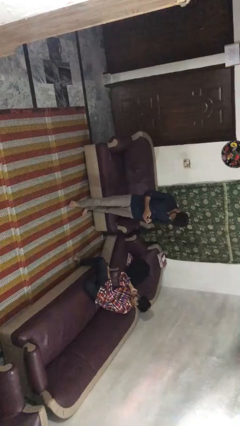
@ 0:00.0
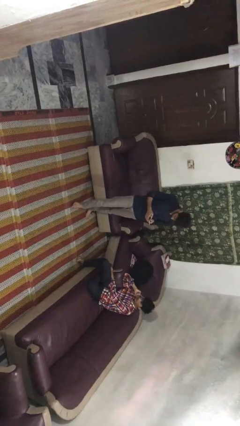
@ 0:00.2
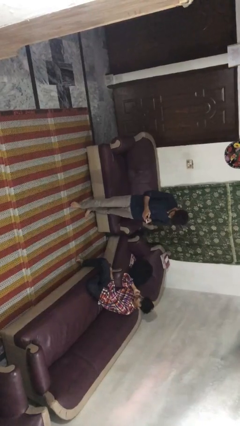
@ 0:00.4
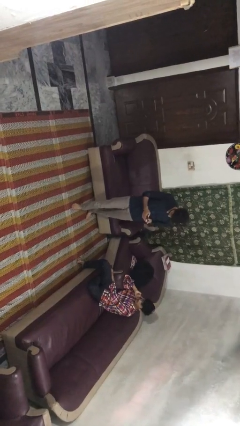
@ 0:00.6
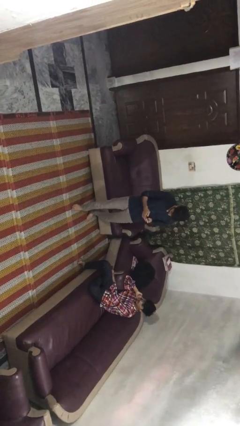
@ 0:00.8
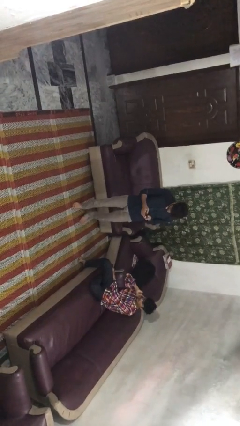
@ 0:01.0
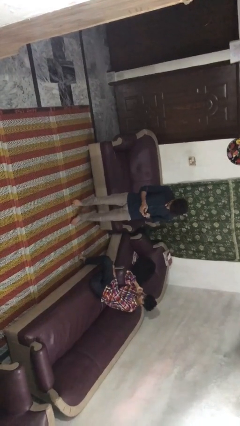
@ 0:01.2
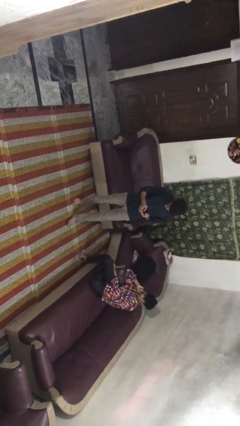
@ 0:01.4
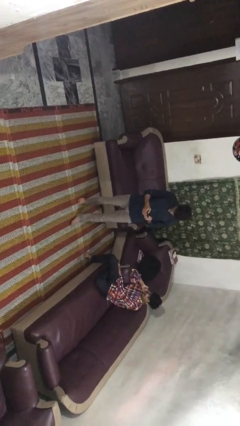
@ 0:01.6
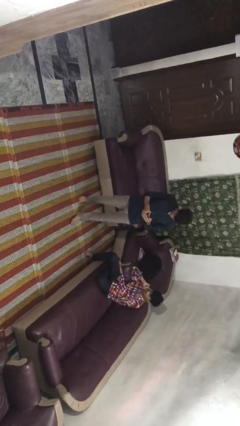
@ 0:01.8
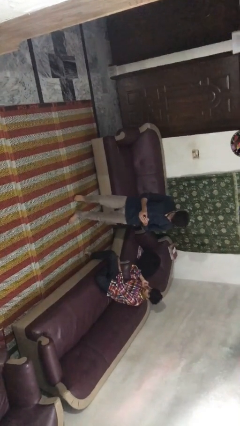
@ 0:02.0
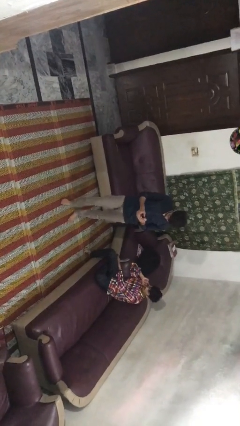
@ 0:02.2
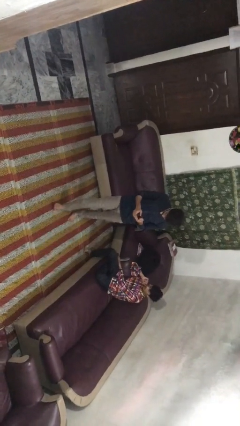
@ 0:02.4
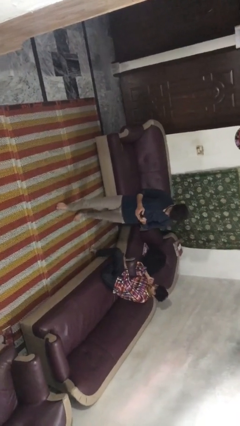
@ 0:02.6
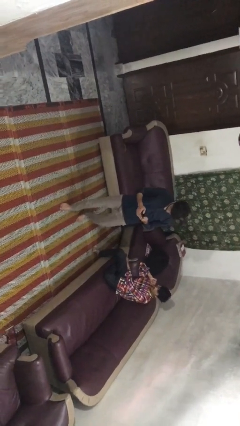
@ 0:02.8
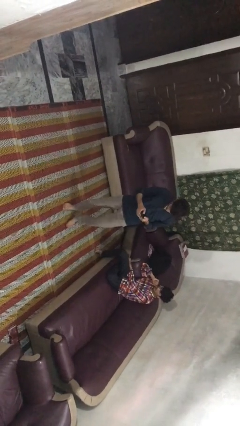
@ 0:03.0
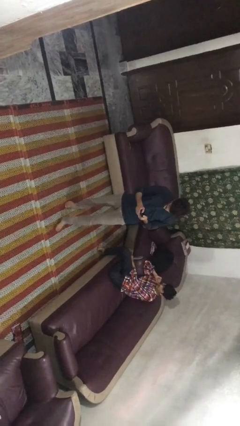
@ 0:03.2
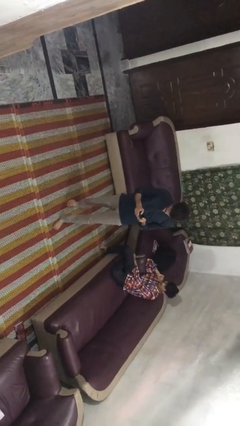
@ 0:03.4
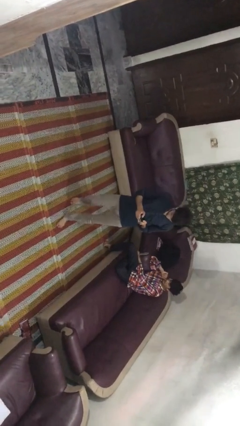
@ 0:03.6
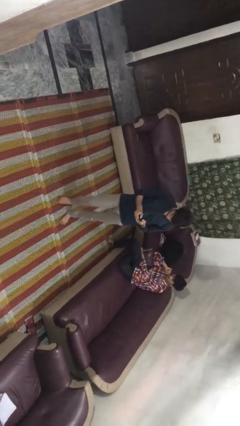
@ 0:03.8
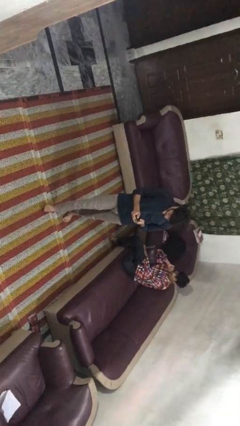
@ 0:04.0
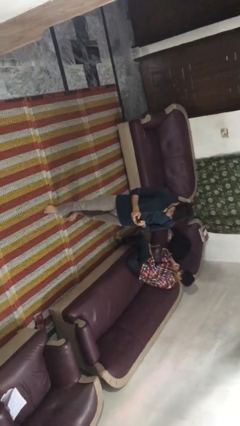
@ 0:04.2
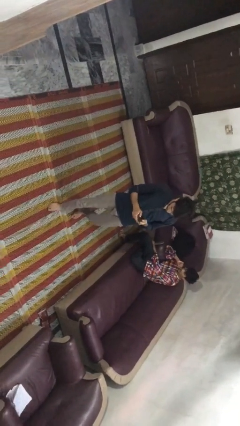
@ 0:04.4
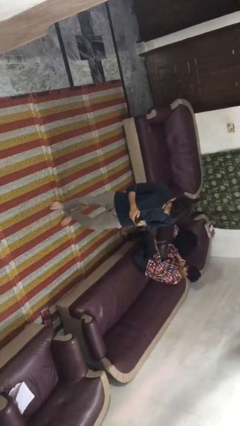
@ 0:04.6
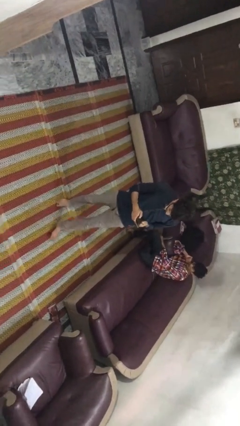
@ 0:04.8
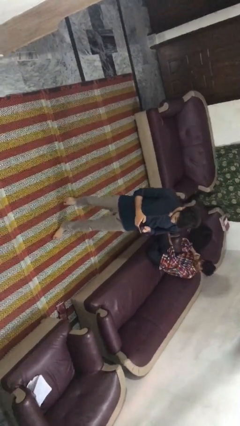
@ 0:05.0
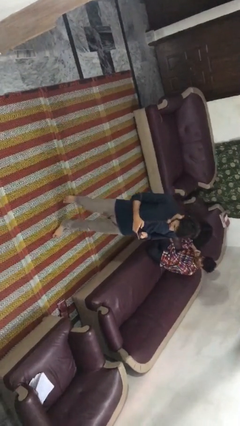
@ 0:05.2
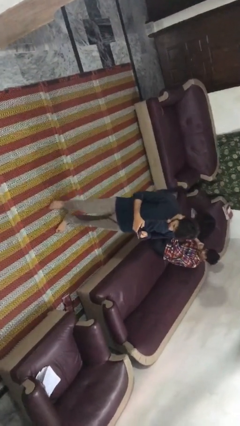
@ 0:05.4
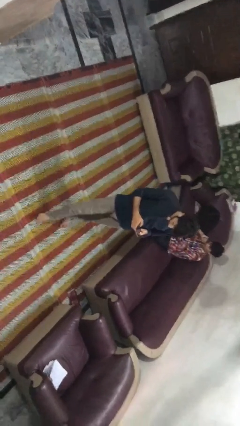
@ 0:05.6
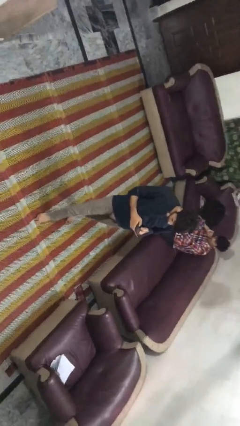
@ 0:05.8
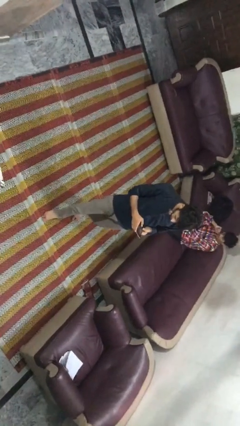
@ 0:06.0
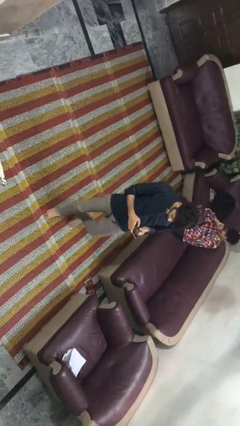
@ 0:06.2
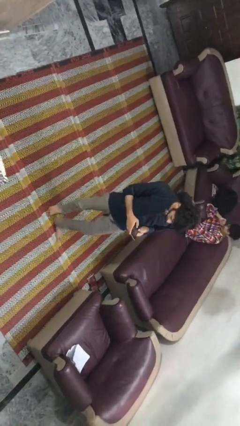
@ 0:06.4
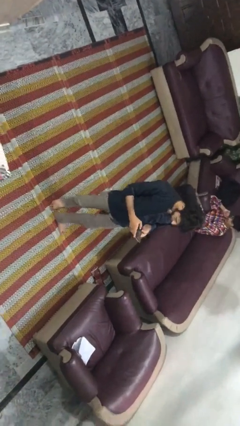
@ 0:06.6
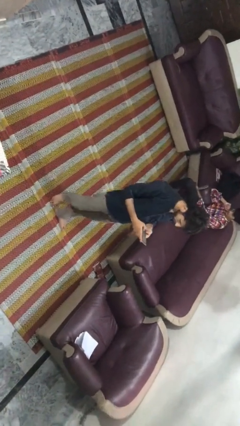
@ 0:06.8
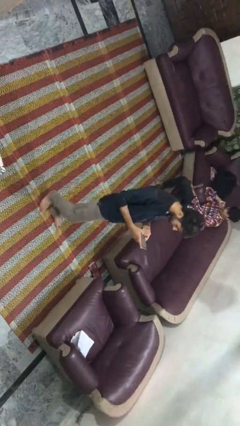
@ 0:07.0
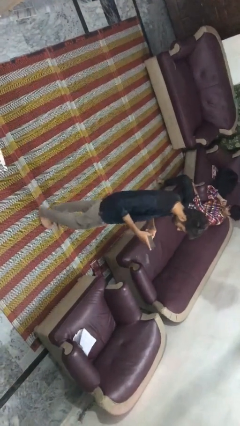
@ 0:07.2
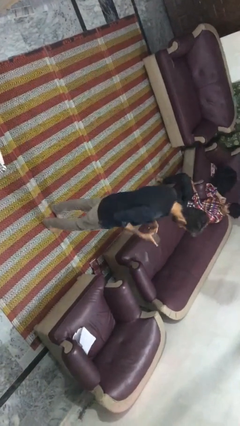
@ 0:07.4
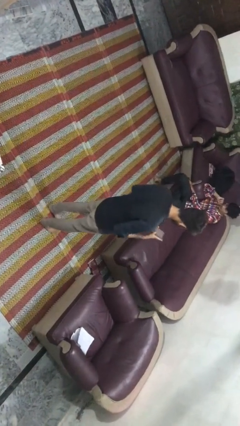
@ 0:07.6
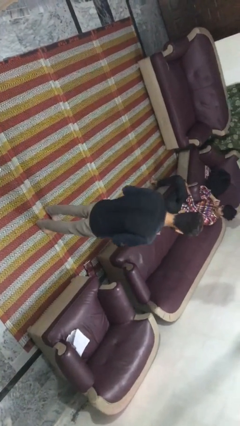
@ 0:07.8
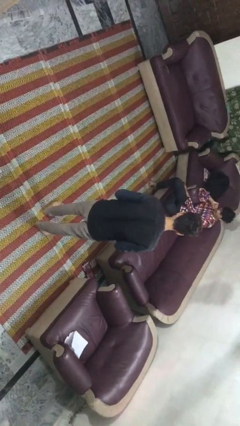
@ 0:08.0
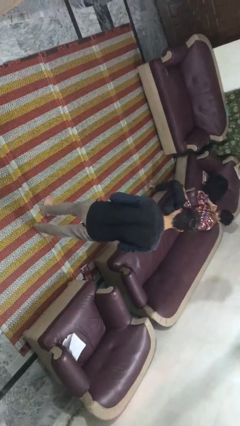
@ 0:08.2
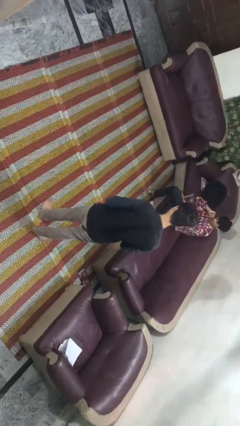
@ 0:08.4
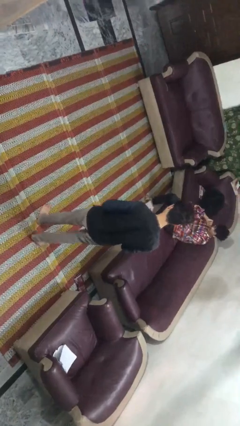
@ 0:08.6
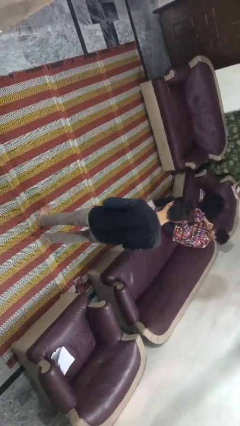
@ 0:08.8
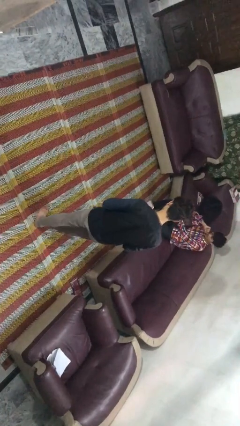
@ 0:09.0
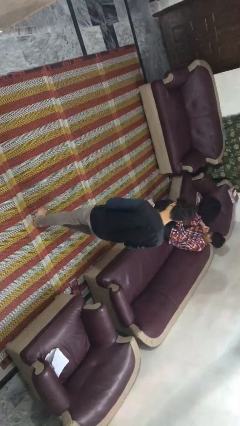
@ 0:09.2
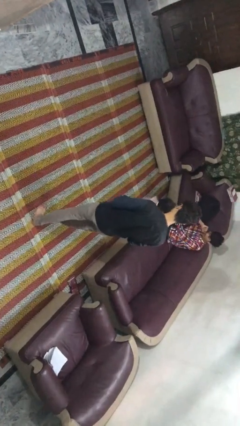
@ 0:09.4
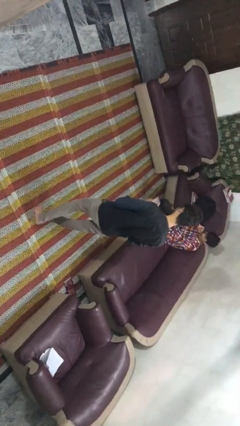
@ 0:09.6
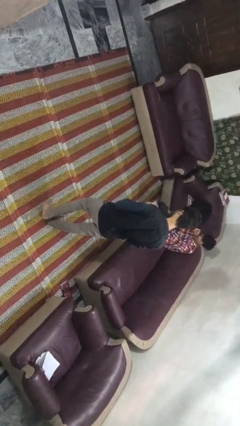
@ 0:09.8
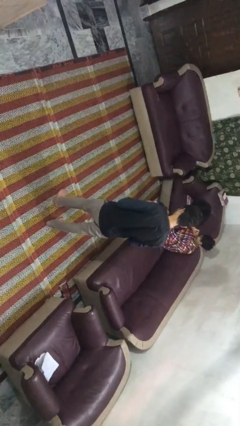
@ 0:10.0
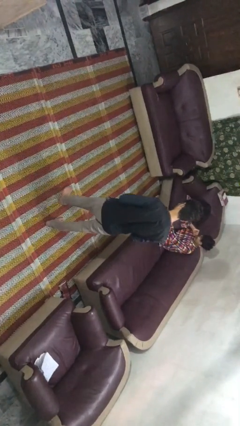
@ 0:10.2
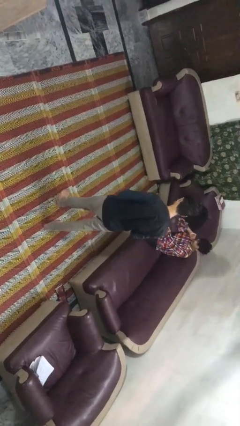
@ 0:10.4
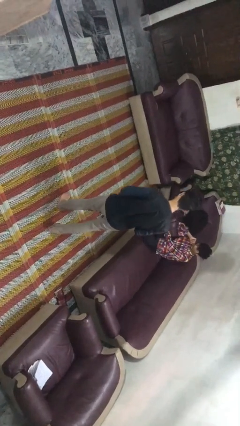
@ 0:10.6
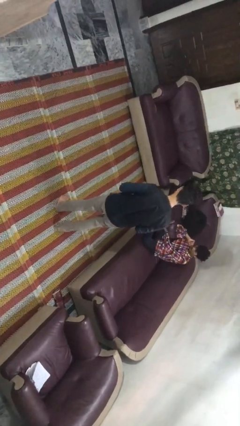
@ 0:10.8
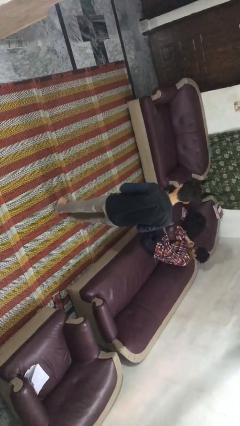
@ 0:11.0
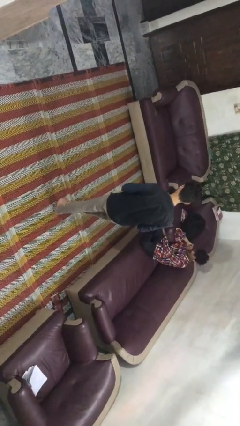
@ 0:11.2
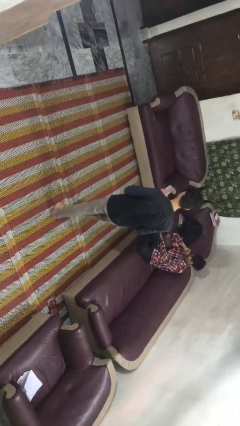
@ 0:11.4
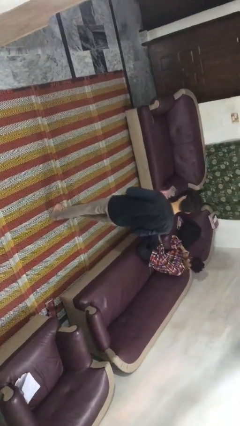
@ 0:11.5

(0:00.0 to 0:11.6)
person texts on phone

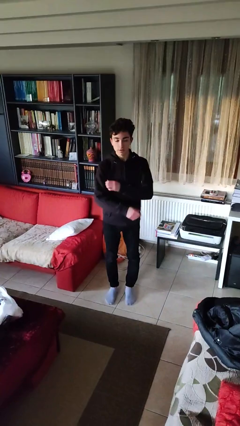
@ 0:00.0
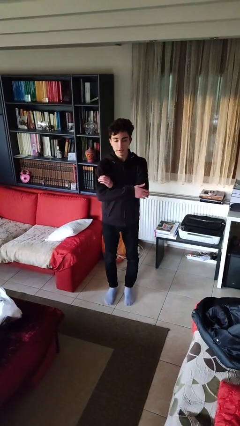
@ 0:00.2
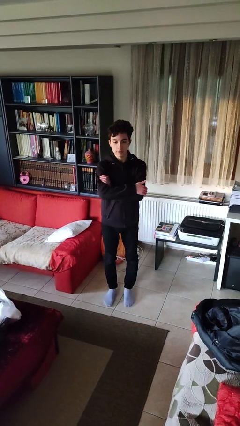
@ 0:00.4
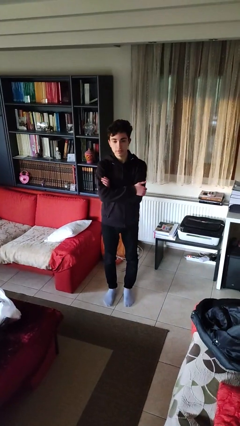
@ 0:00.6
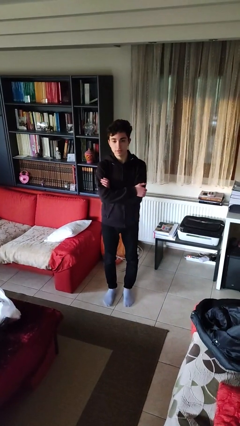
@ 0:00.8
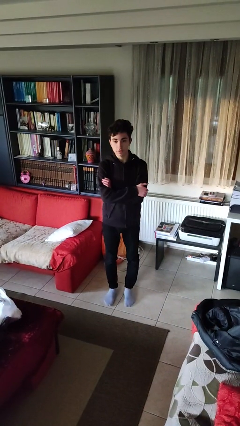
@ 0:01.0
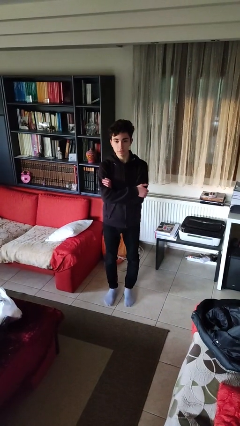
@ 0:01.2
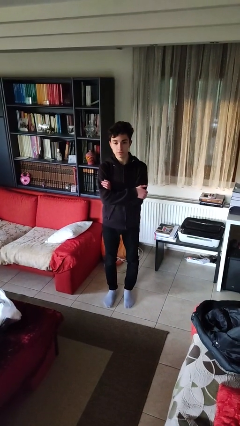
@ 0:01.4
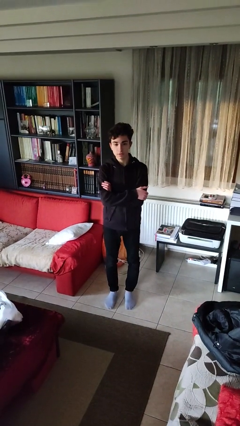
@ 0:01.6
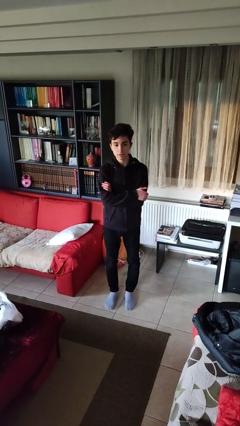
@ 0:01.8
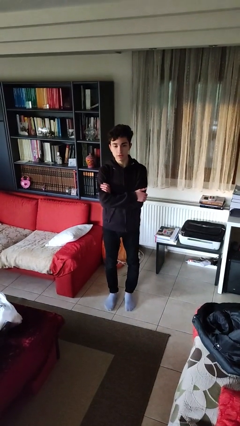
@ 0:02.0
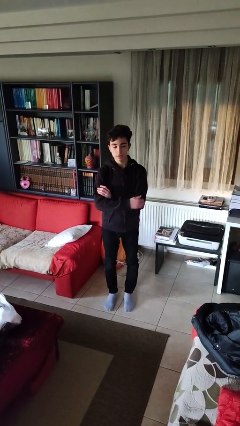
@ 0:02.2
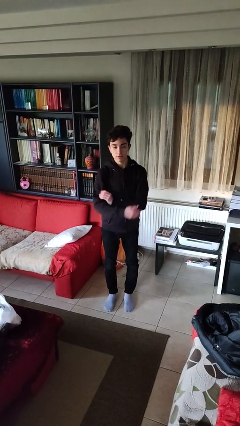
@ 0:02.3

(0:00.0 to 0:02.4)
person crosses arms

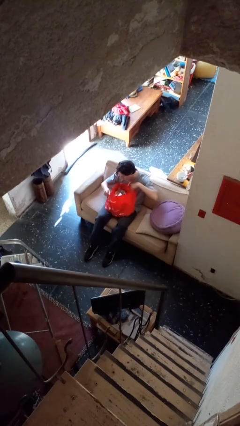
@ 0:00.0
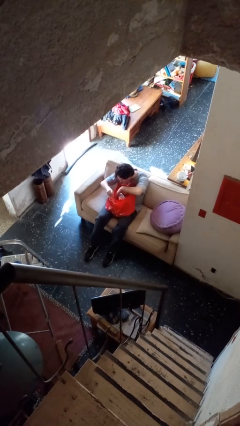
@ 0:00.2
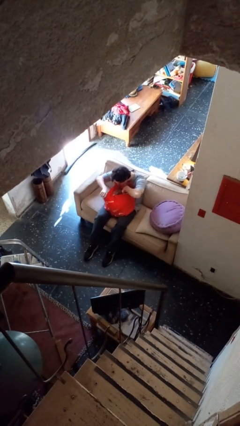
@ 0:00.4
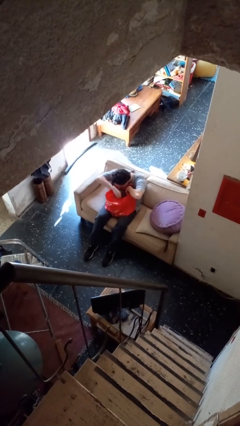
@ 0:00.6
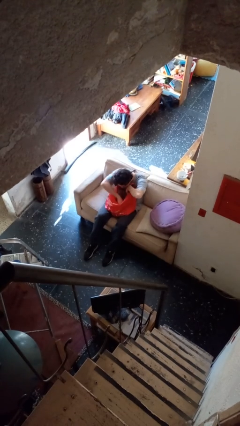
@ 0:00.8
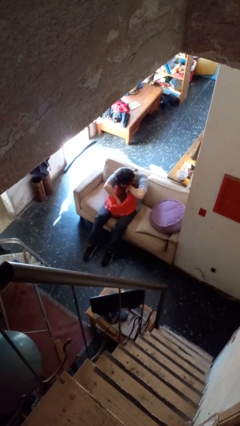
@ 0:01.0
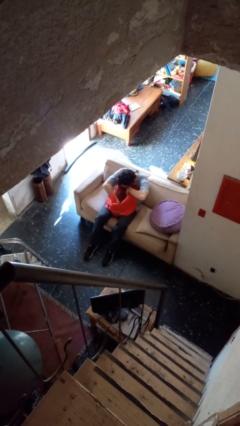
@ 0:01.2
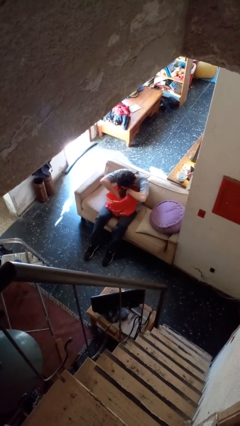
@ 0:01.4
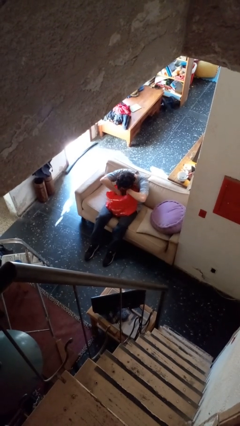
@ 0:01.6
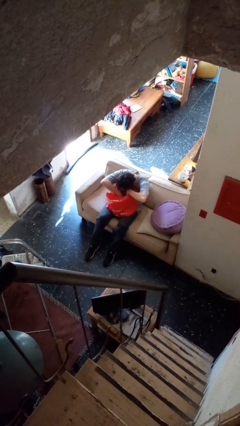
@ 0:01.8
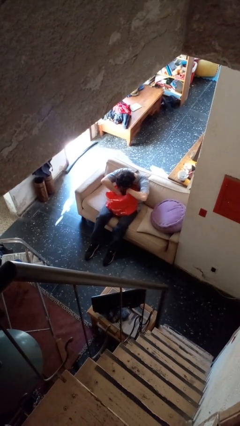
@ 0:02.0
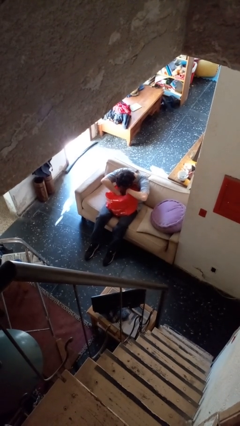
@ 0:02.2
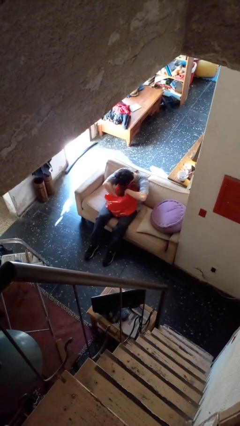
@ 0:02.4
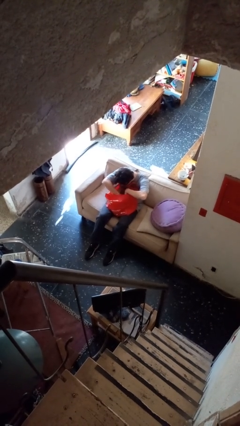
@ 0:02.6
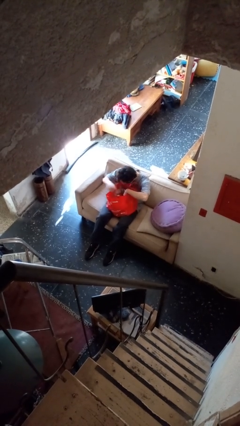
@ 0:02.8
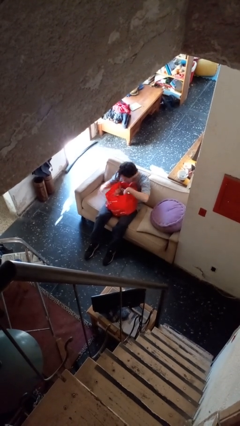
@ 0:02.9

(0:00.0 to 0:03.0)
person searches in bag

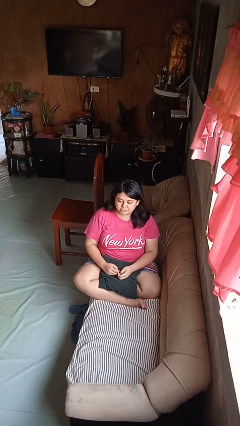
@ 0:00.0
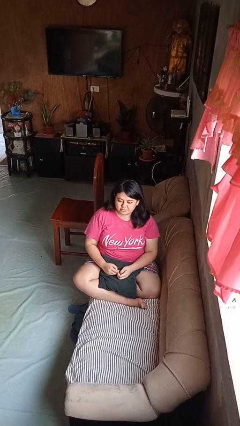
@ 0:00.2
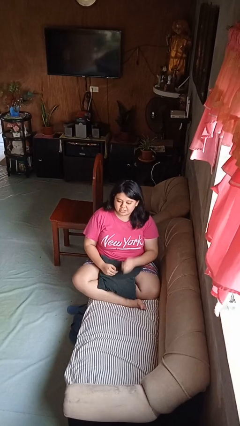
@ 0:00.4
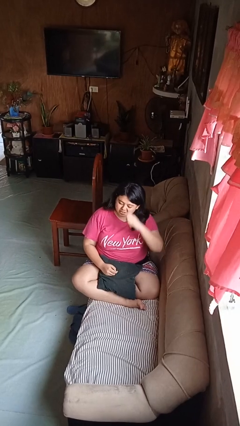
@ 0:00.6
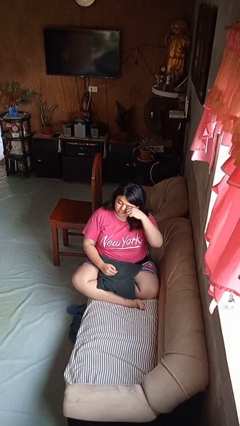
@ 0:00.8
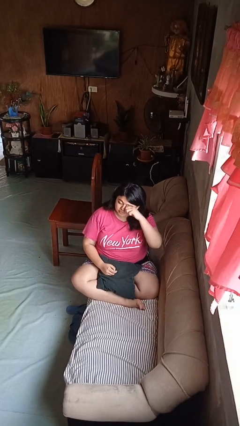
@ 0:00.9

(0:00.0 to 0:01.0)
person rubs eyes
